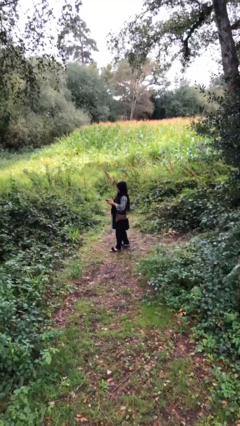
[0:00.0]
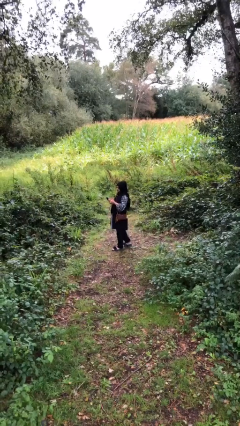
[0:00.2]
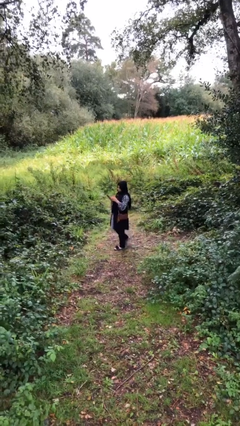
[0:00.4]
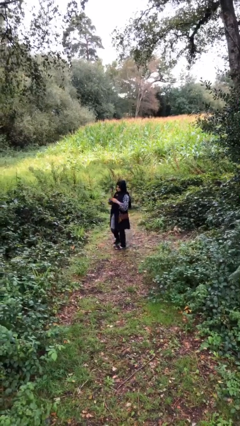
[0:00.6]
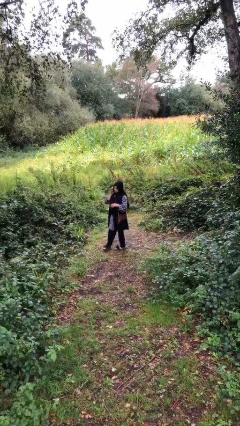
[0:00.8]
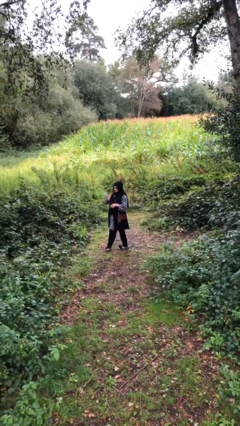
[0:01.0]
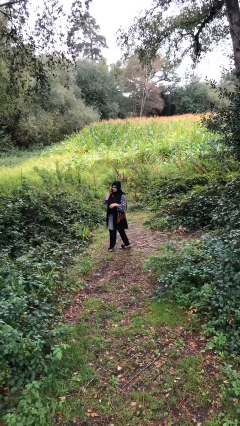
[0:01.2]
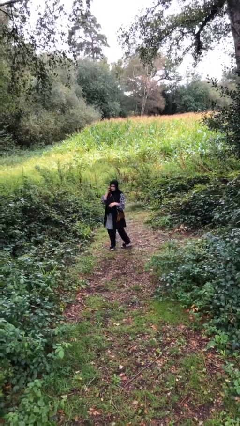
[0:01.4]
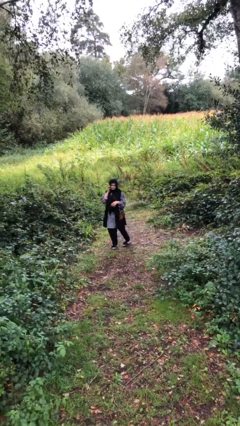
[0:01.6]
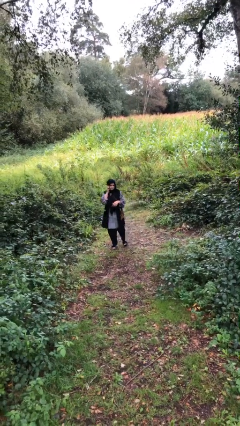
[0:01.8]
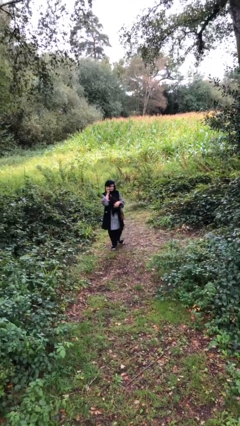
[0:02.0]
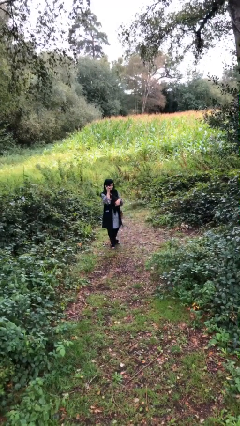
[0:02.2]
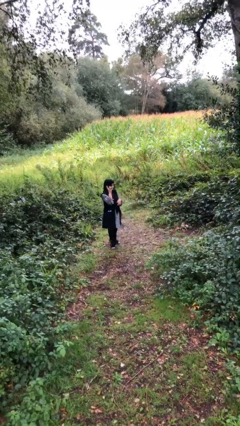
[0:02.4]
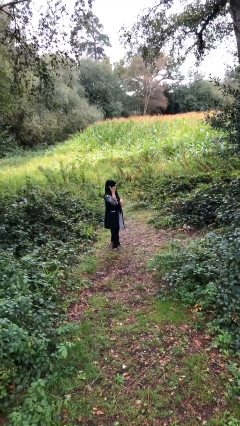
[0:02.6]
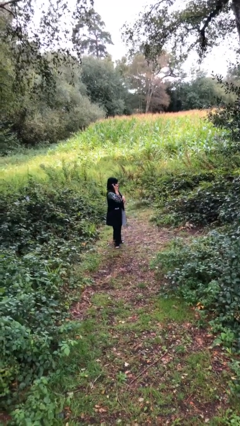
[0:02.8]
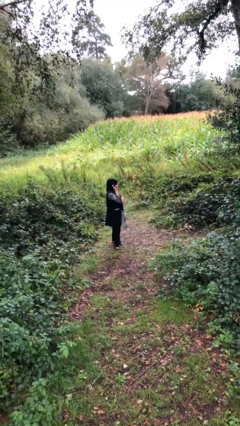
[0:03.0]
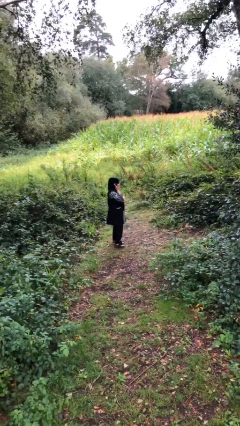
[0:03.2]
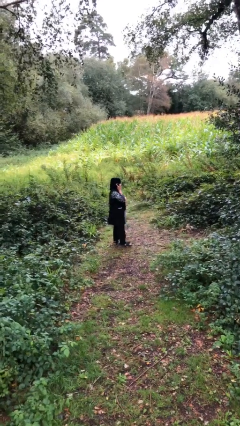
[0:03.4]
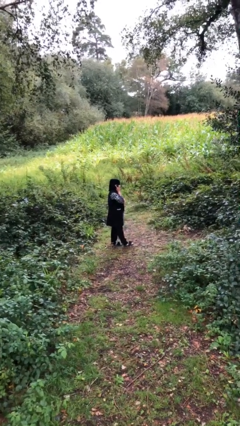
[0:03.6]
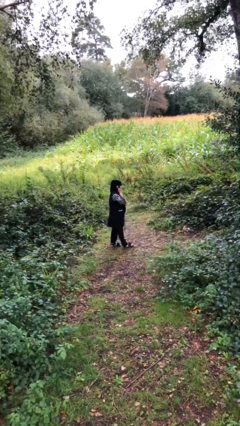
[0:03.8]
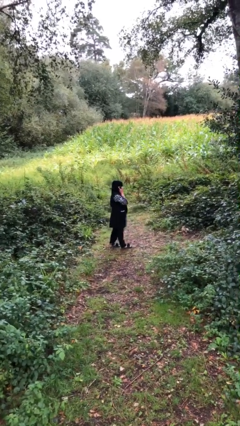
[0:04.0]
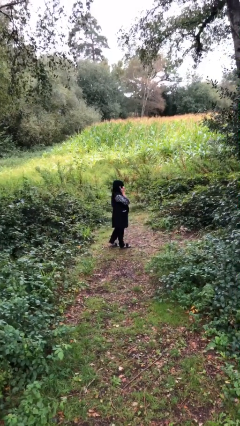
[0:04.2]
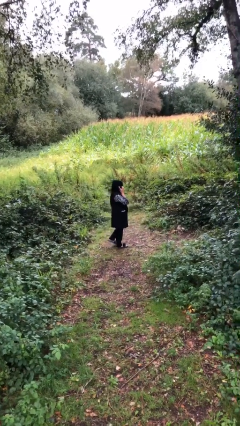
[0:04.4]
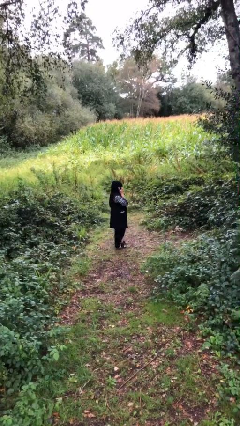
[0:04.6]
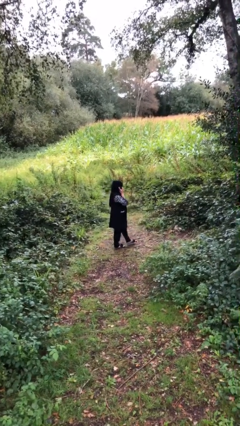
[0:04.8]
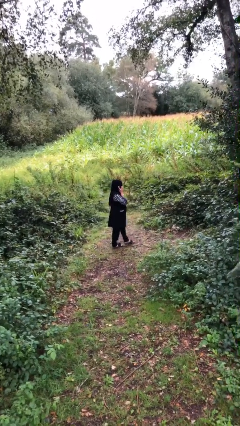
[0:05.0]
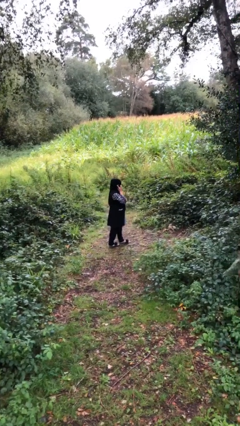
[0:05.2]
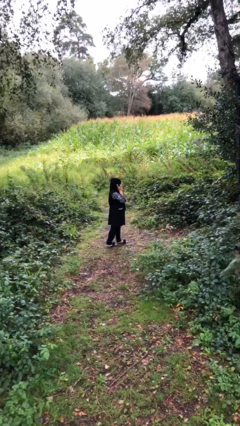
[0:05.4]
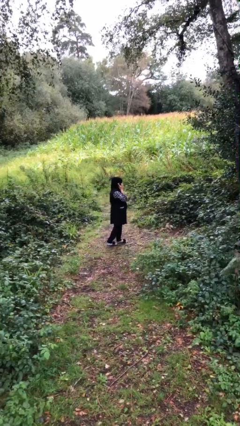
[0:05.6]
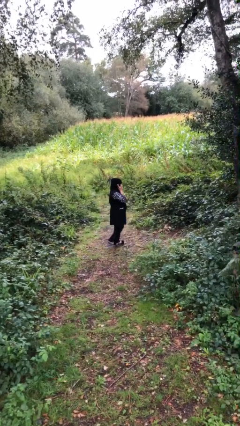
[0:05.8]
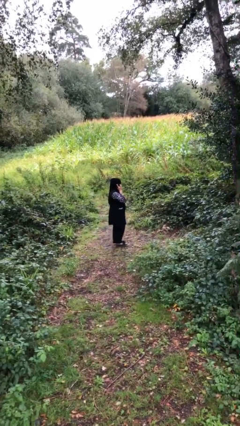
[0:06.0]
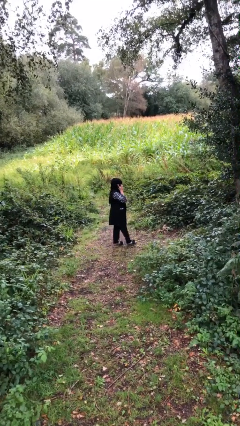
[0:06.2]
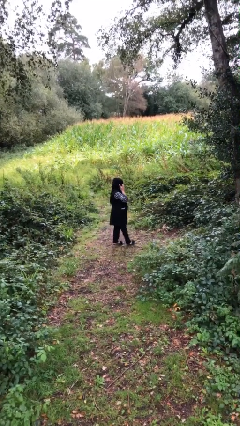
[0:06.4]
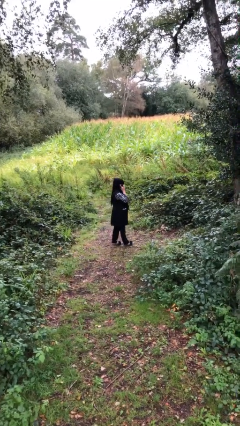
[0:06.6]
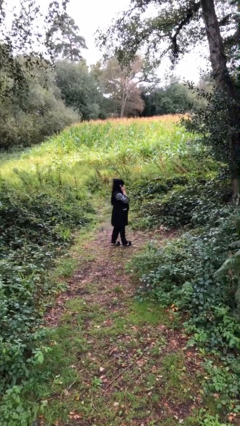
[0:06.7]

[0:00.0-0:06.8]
person talks on phone

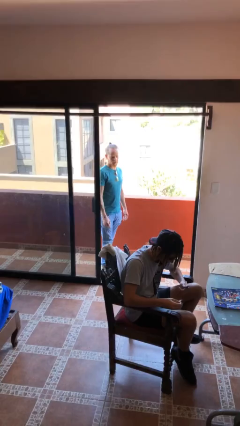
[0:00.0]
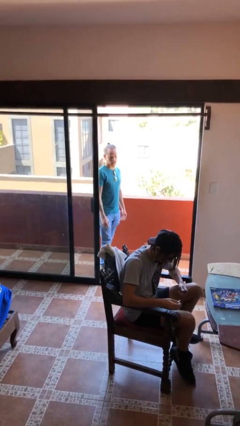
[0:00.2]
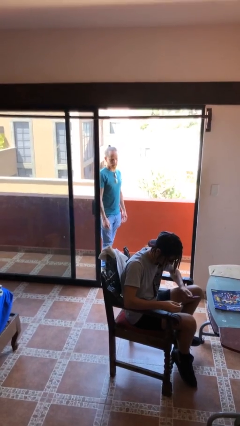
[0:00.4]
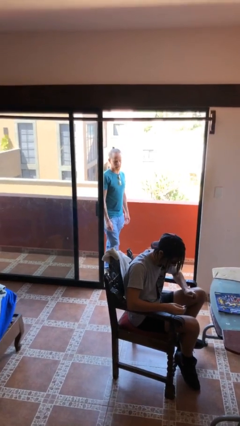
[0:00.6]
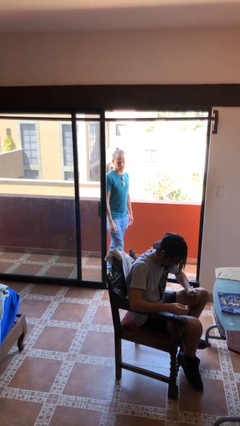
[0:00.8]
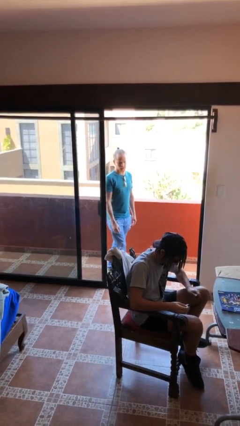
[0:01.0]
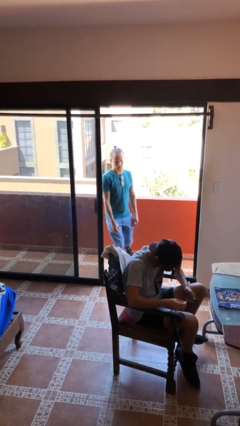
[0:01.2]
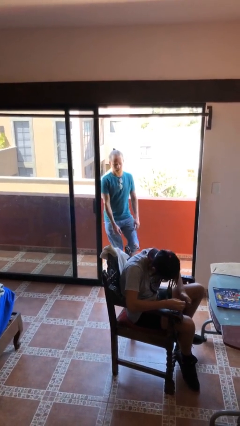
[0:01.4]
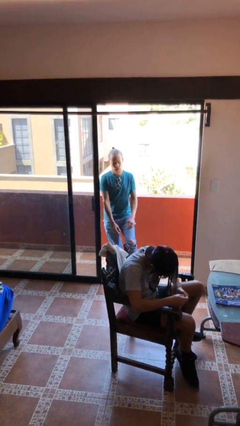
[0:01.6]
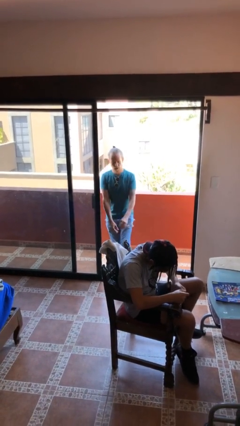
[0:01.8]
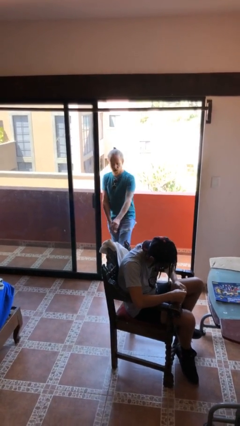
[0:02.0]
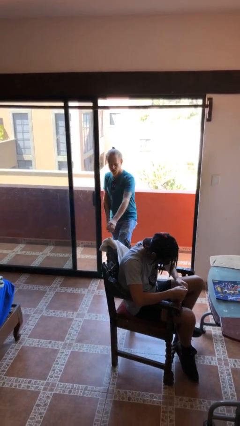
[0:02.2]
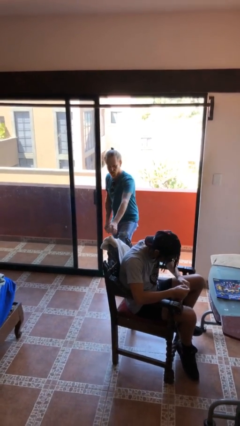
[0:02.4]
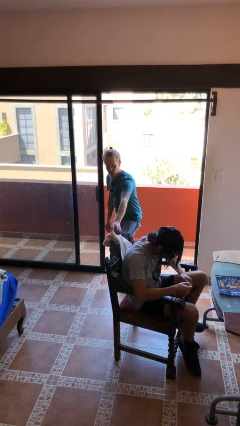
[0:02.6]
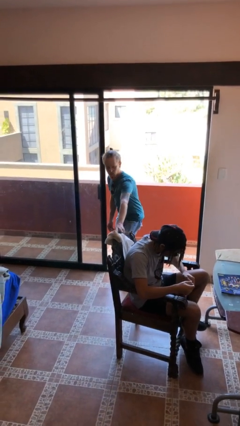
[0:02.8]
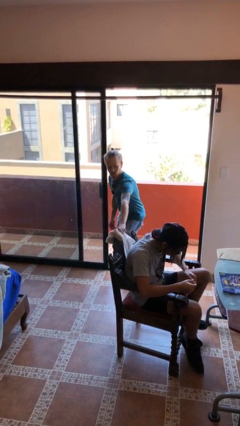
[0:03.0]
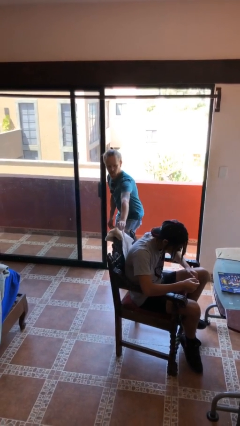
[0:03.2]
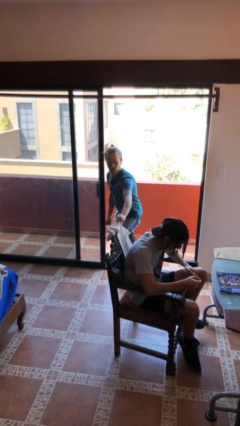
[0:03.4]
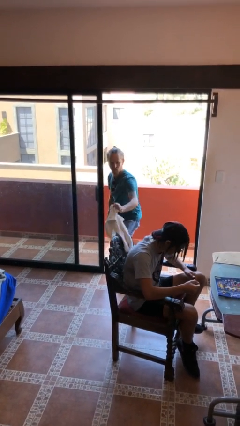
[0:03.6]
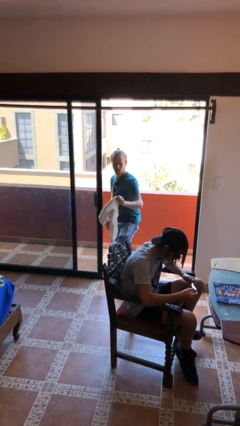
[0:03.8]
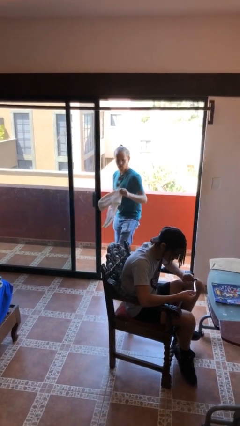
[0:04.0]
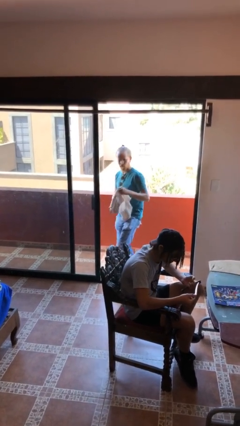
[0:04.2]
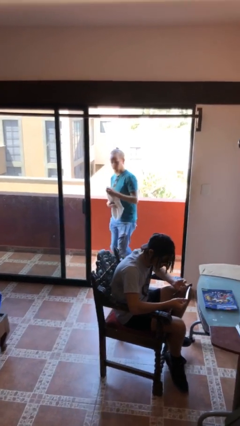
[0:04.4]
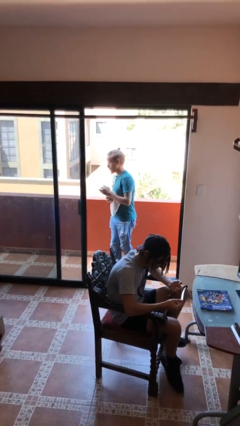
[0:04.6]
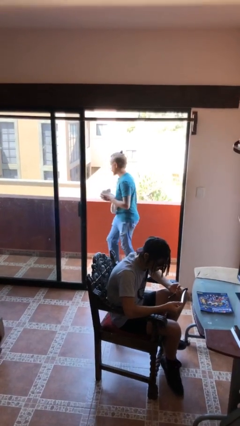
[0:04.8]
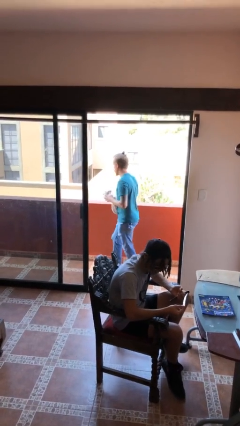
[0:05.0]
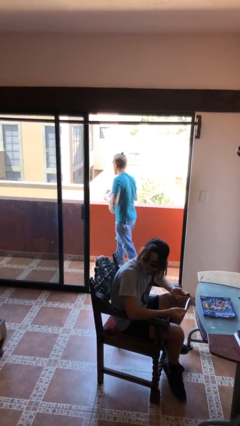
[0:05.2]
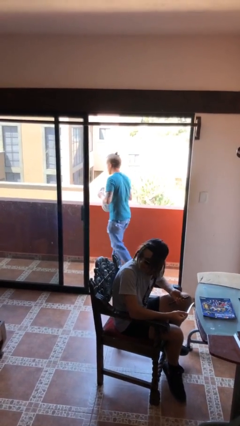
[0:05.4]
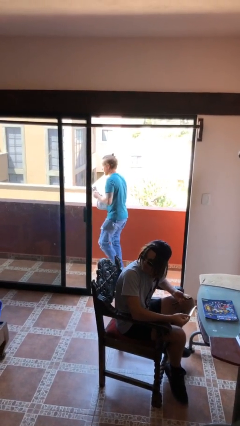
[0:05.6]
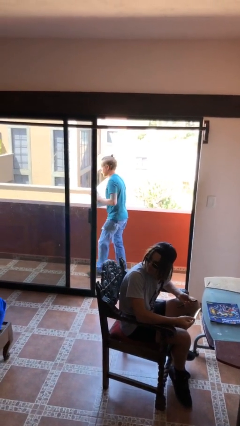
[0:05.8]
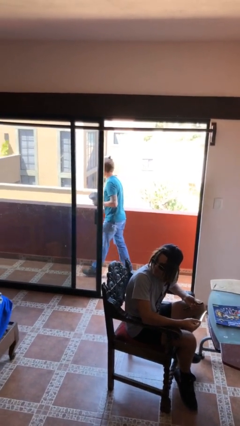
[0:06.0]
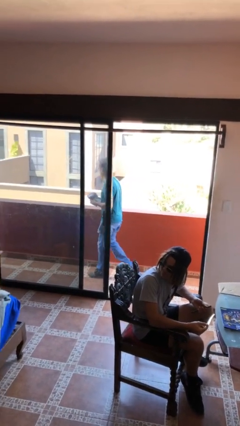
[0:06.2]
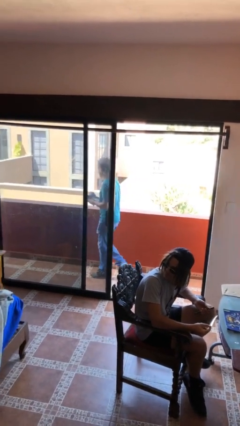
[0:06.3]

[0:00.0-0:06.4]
person steals object from person

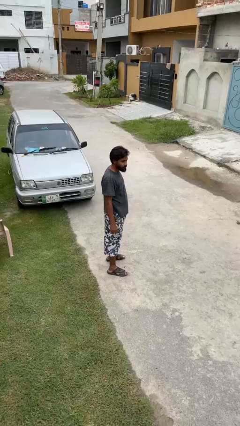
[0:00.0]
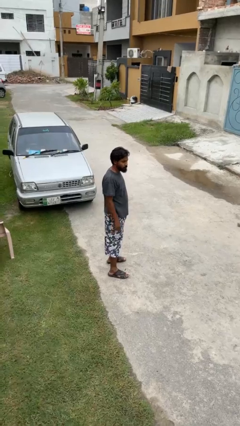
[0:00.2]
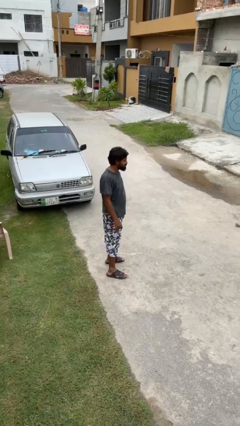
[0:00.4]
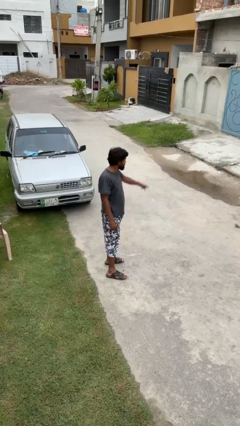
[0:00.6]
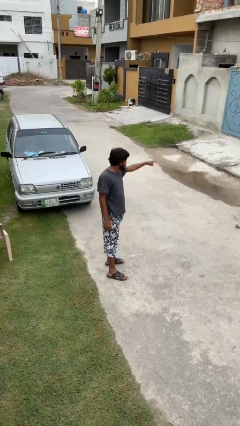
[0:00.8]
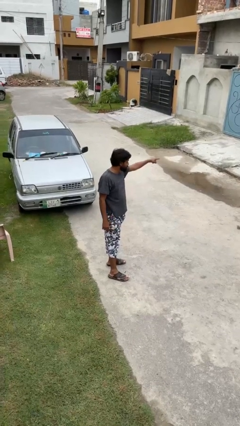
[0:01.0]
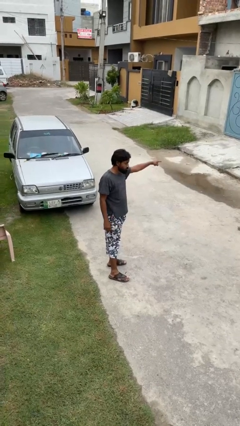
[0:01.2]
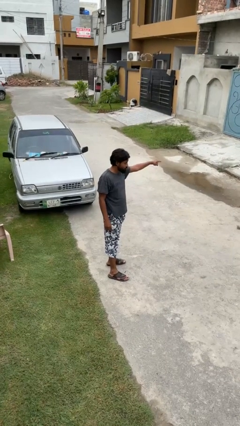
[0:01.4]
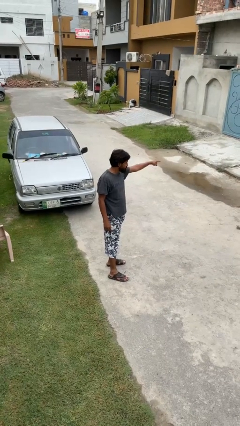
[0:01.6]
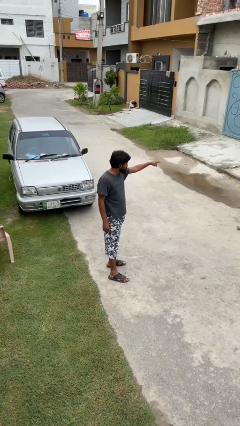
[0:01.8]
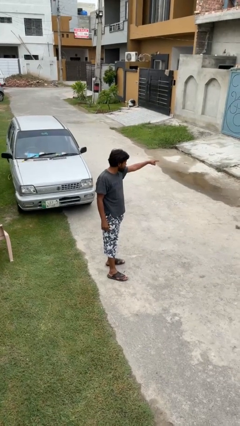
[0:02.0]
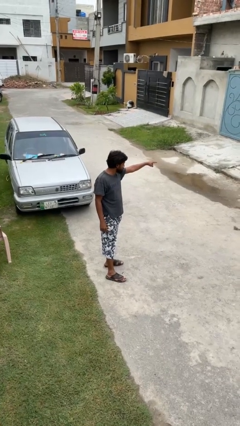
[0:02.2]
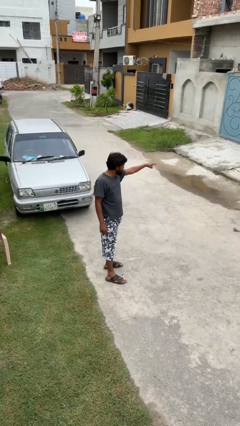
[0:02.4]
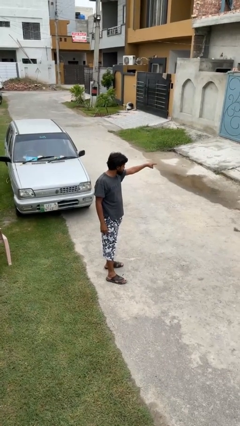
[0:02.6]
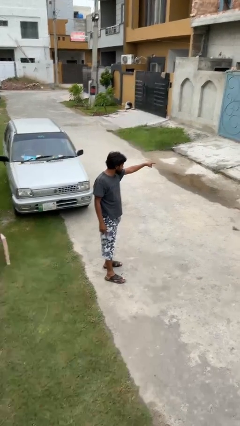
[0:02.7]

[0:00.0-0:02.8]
person points at person

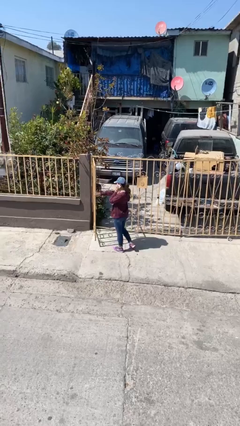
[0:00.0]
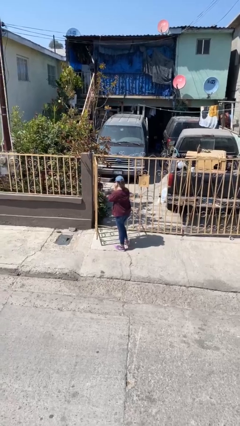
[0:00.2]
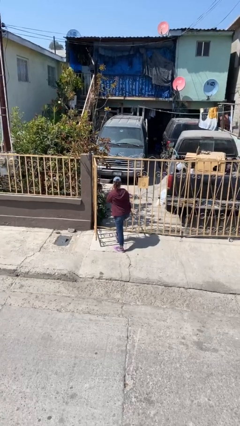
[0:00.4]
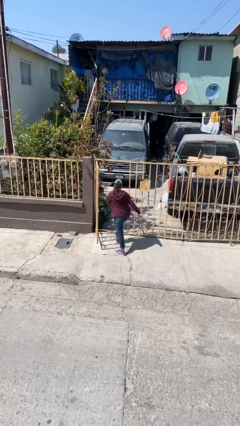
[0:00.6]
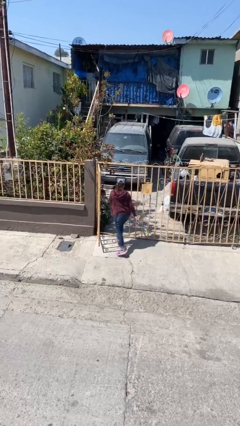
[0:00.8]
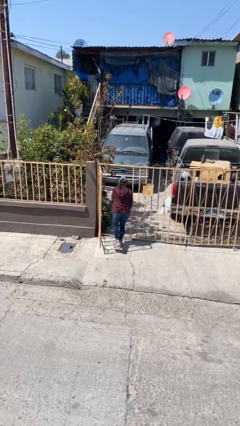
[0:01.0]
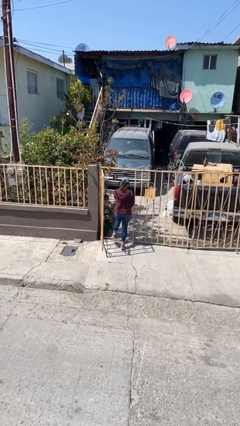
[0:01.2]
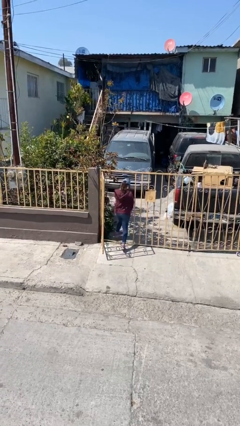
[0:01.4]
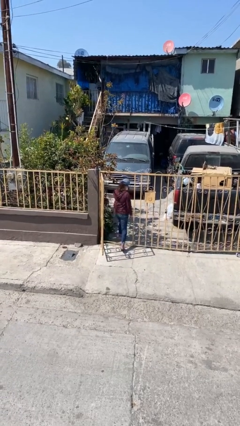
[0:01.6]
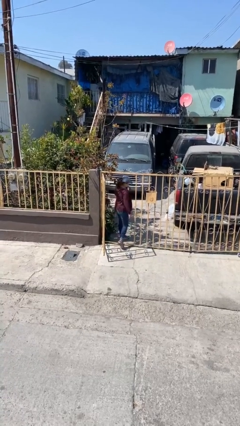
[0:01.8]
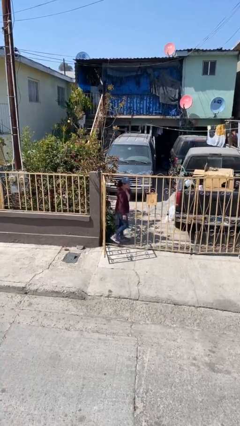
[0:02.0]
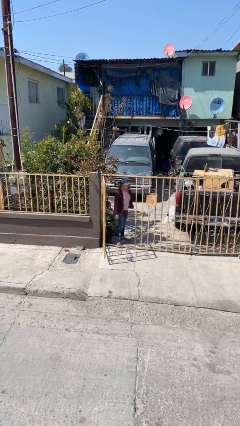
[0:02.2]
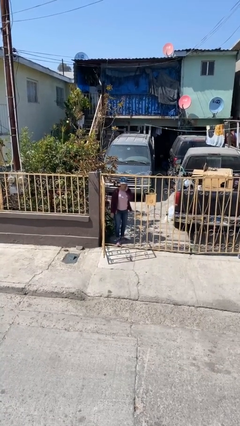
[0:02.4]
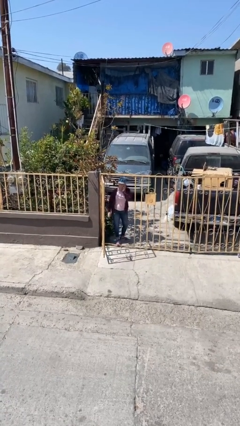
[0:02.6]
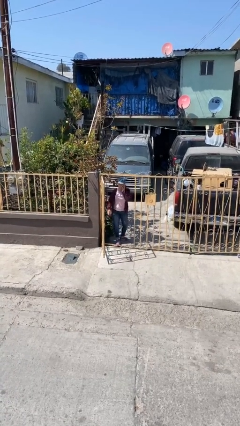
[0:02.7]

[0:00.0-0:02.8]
person exits scene through structure
